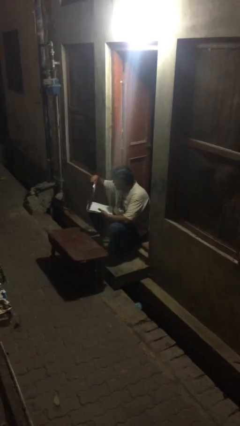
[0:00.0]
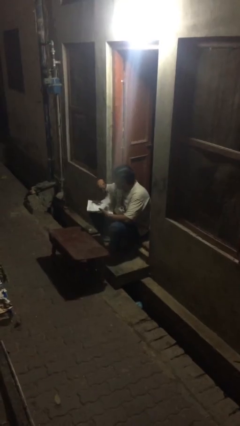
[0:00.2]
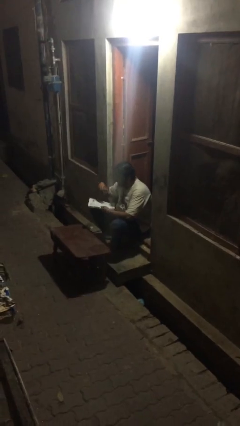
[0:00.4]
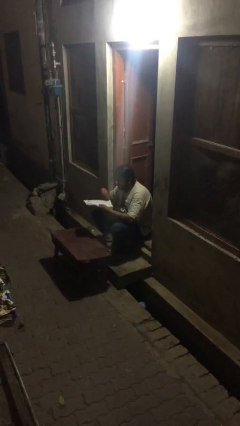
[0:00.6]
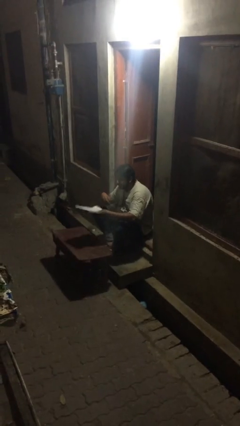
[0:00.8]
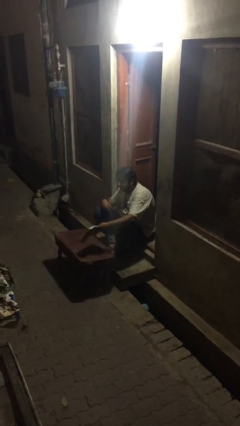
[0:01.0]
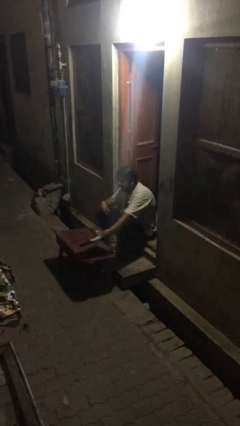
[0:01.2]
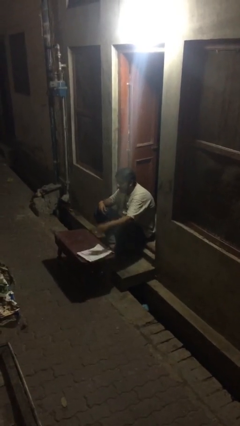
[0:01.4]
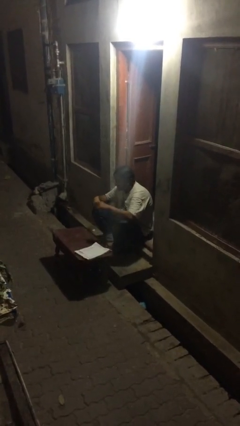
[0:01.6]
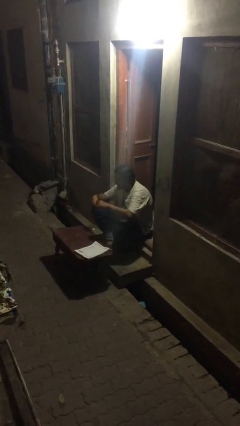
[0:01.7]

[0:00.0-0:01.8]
person puts down object on table

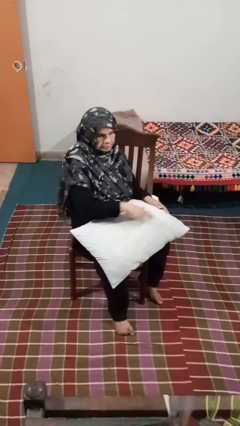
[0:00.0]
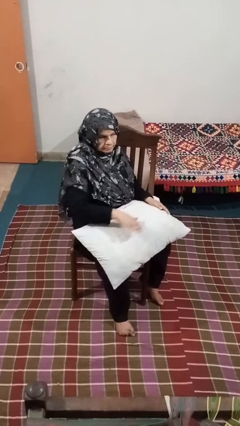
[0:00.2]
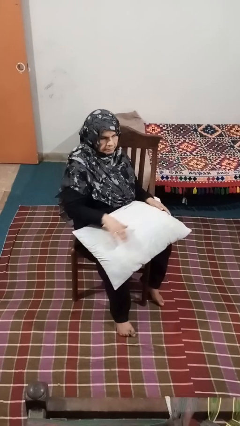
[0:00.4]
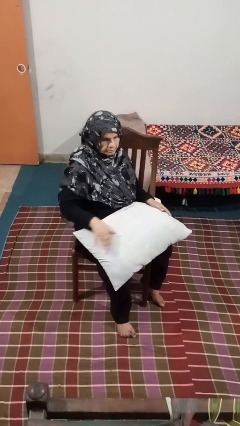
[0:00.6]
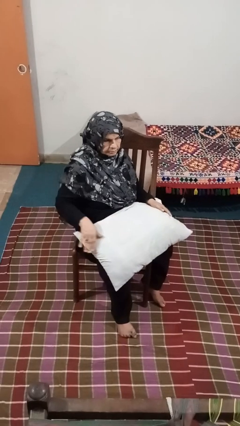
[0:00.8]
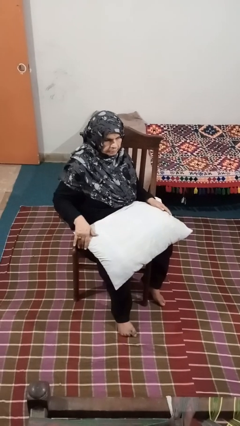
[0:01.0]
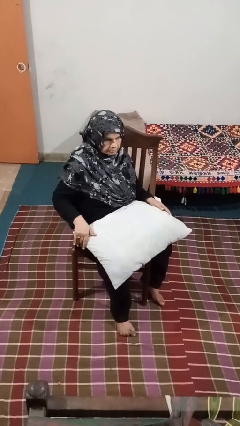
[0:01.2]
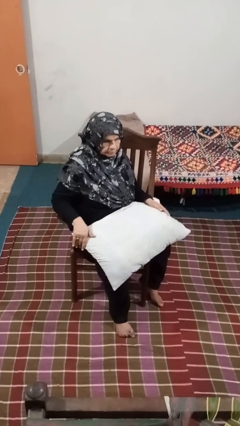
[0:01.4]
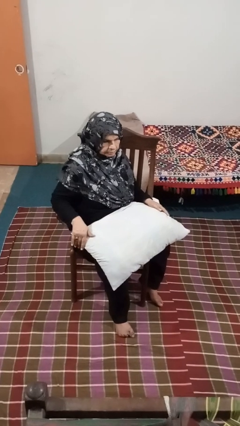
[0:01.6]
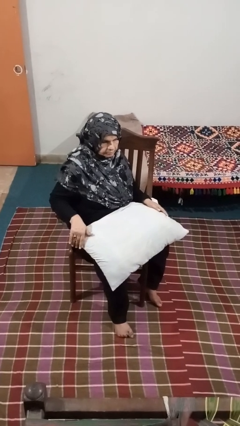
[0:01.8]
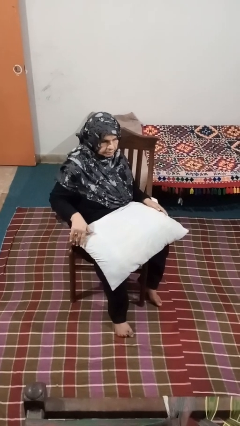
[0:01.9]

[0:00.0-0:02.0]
person waves hand over object

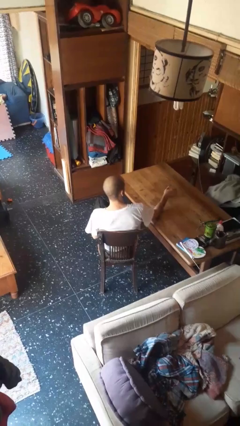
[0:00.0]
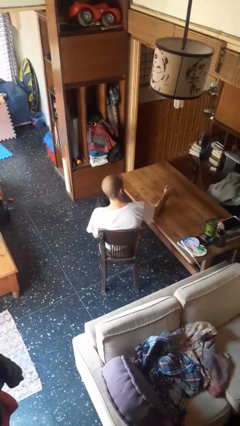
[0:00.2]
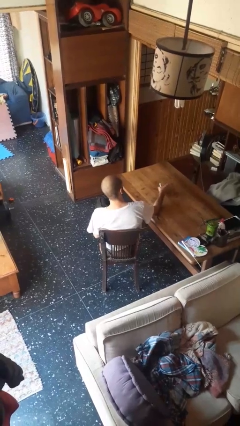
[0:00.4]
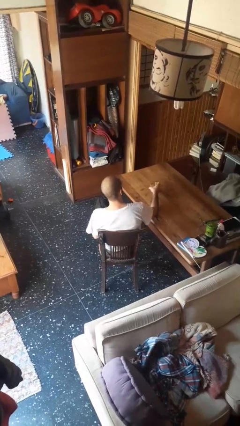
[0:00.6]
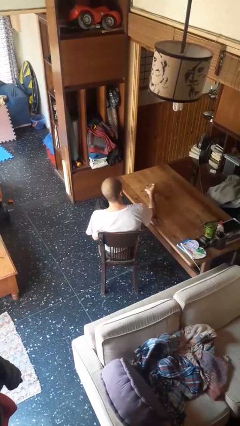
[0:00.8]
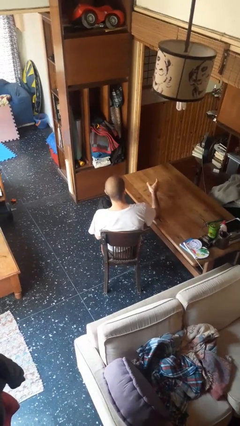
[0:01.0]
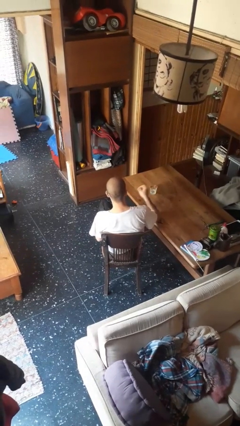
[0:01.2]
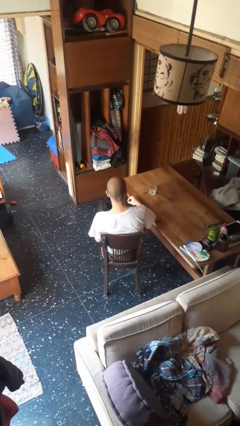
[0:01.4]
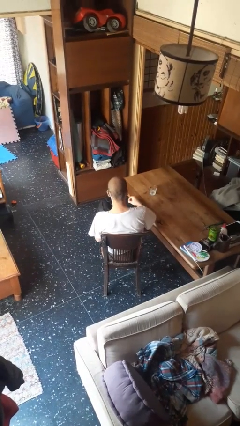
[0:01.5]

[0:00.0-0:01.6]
person sets upright glass

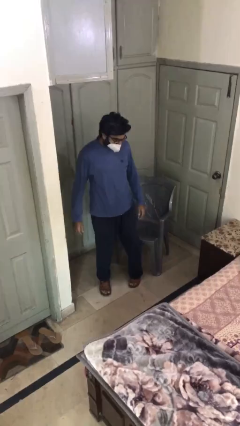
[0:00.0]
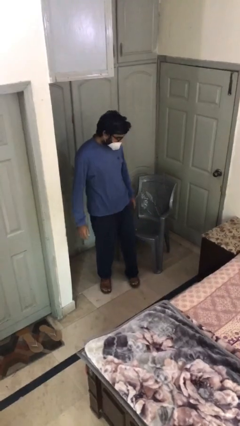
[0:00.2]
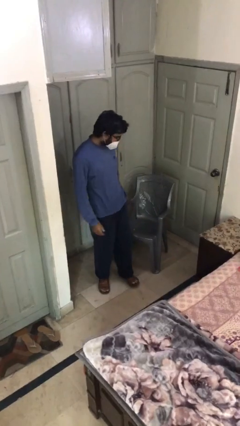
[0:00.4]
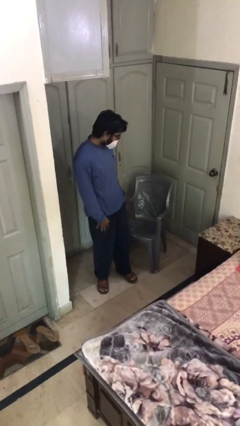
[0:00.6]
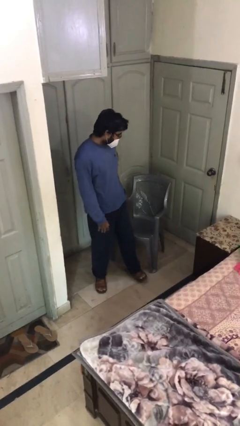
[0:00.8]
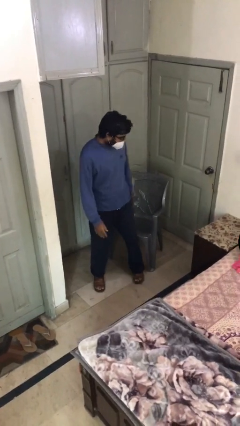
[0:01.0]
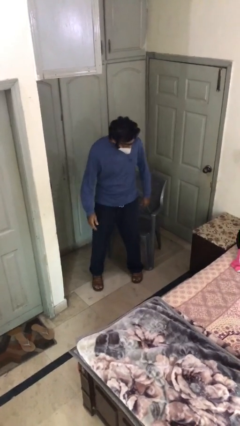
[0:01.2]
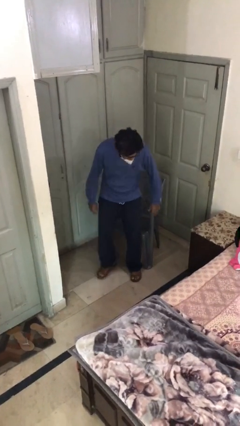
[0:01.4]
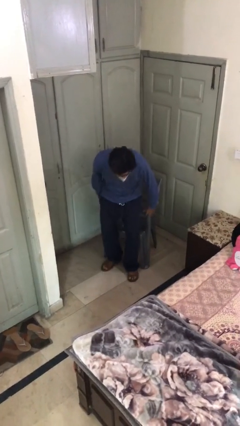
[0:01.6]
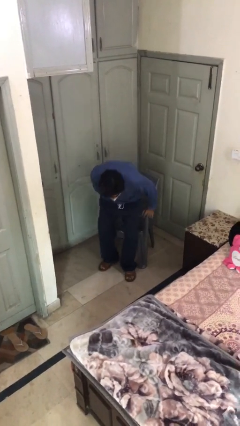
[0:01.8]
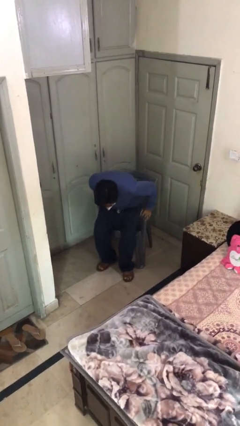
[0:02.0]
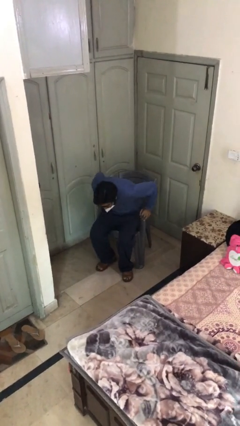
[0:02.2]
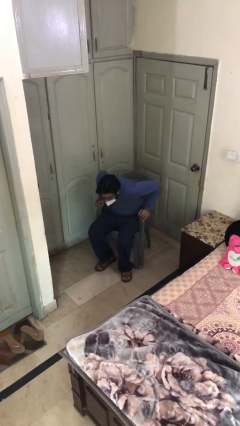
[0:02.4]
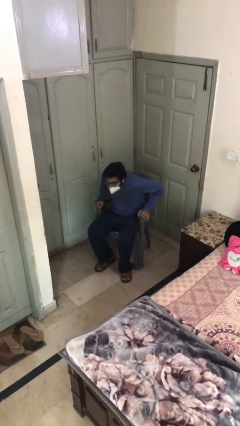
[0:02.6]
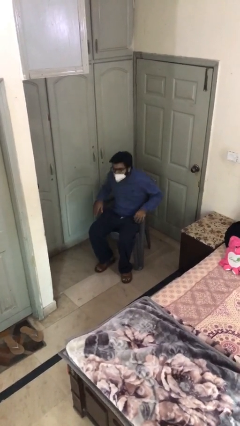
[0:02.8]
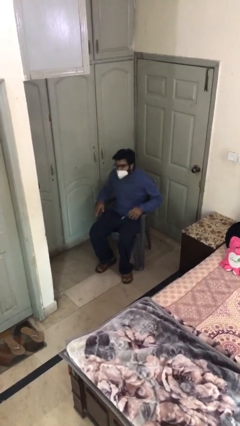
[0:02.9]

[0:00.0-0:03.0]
person sits down

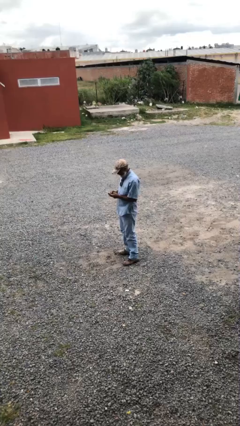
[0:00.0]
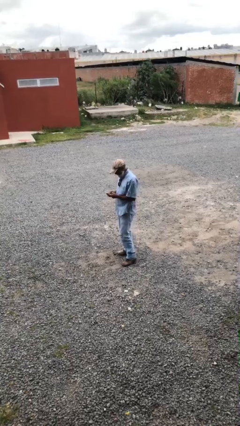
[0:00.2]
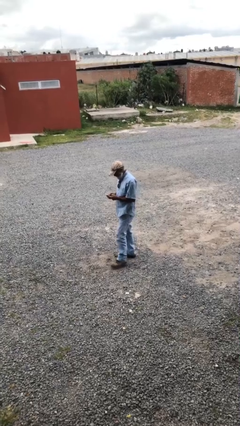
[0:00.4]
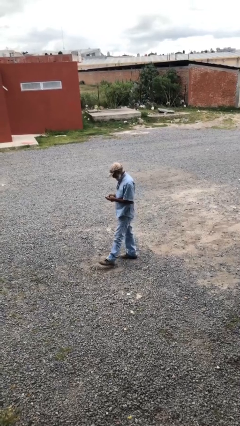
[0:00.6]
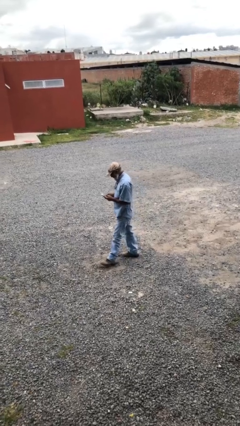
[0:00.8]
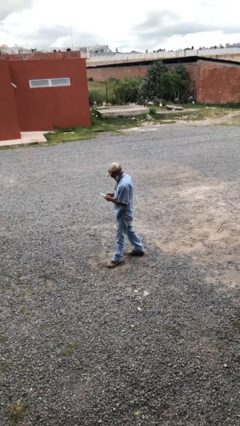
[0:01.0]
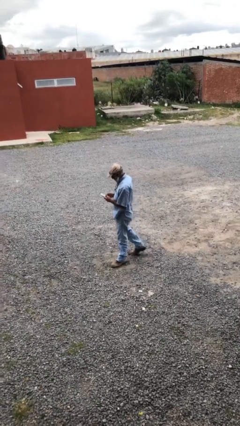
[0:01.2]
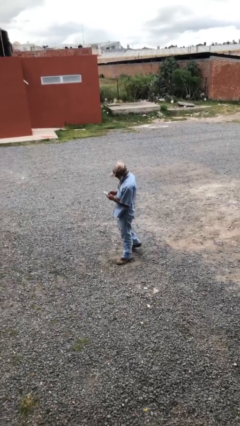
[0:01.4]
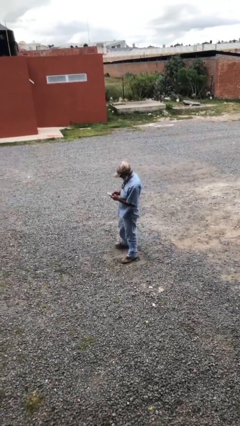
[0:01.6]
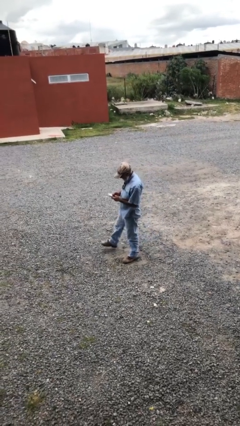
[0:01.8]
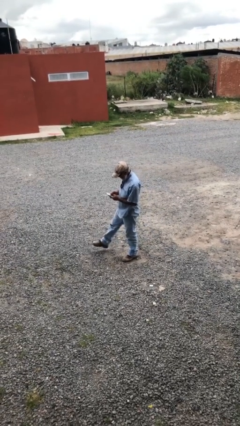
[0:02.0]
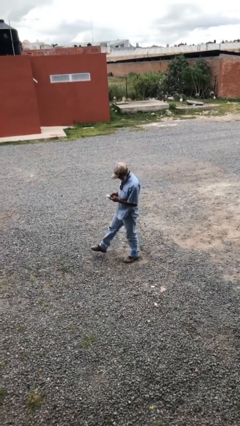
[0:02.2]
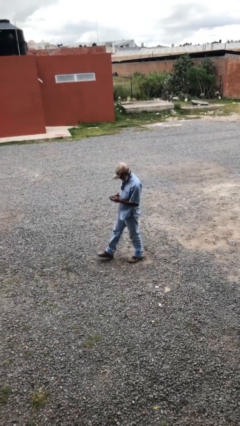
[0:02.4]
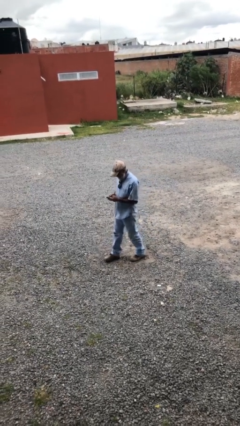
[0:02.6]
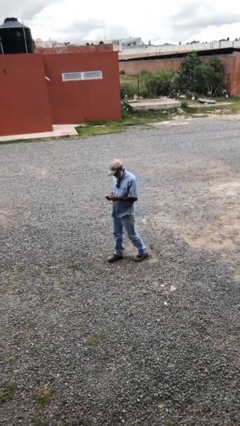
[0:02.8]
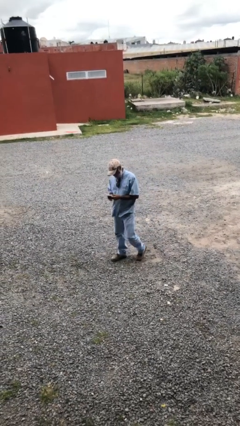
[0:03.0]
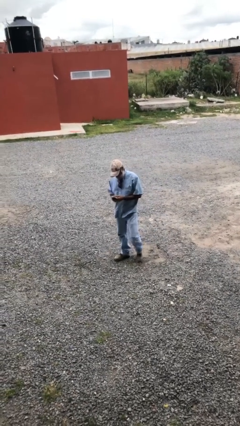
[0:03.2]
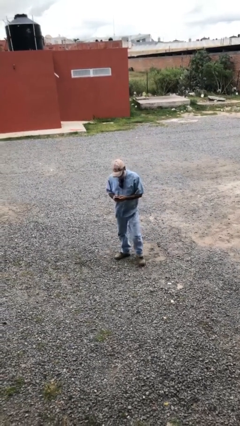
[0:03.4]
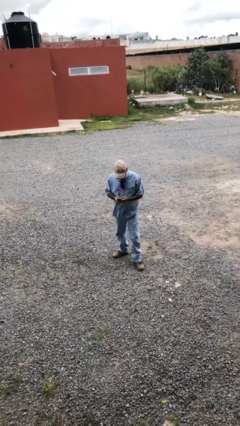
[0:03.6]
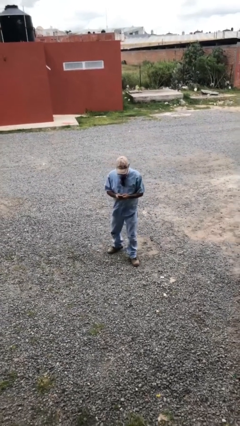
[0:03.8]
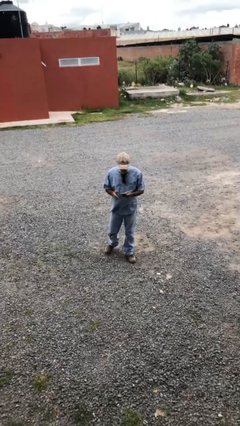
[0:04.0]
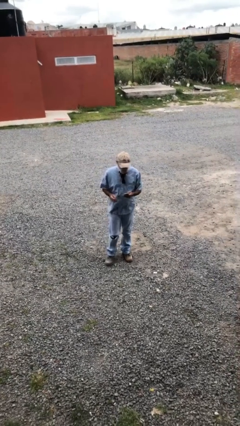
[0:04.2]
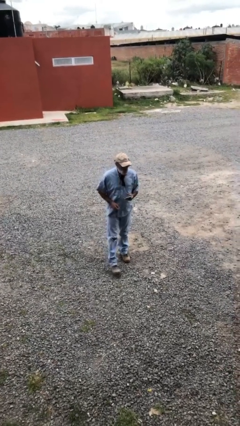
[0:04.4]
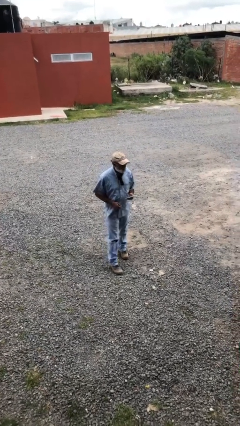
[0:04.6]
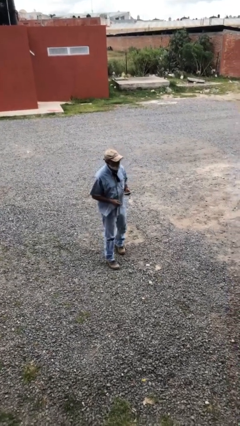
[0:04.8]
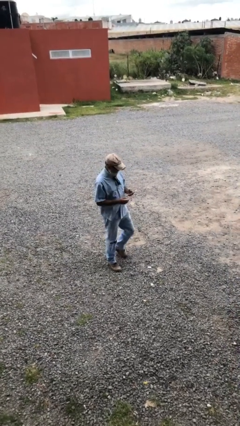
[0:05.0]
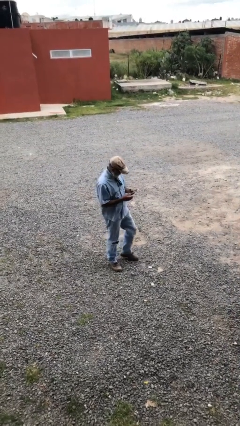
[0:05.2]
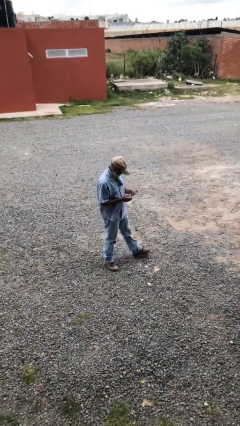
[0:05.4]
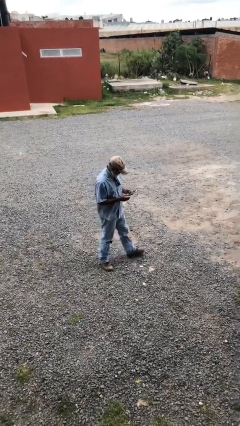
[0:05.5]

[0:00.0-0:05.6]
person texts on phone

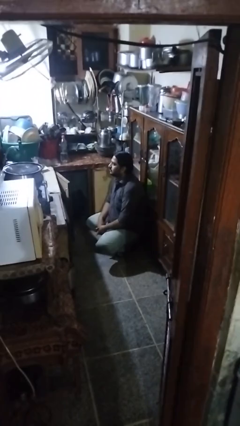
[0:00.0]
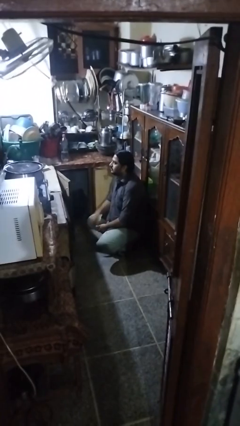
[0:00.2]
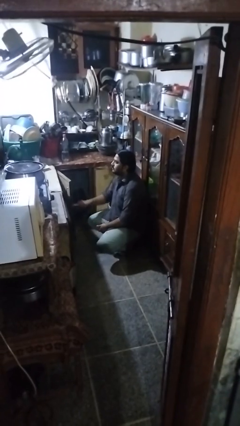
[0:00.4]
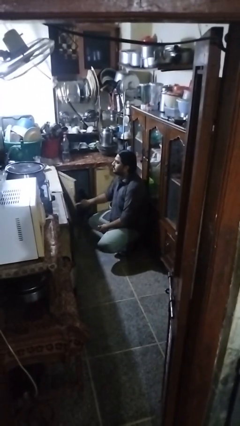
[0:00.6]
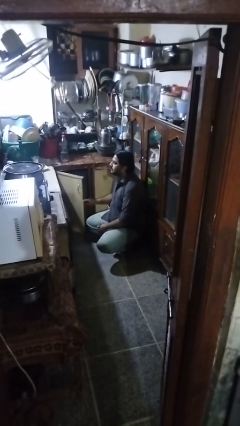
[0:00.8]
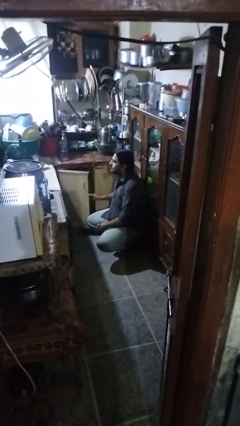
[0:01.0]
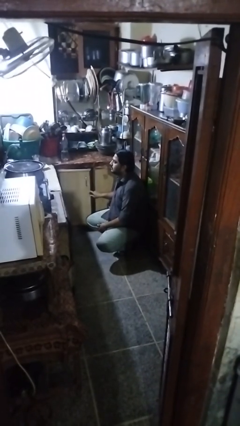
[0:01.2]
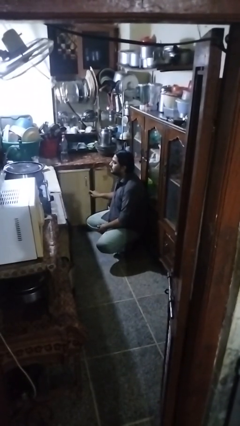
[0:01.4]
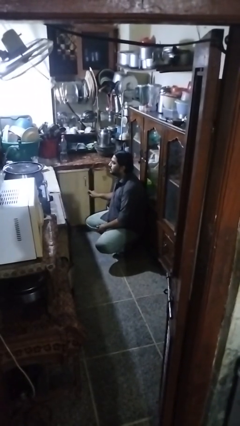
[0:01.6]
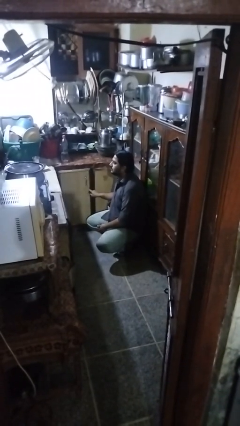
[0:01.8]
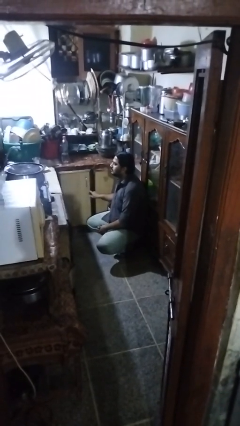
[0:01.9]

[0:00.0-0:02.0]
person closes cabinet

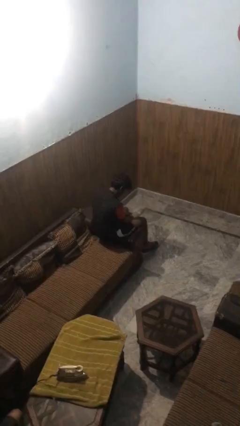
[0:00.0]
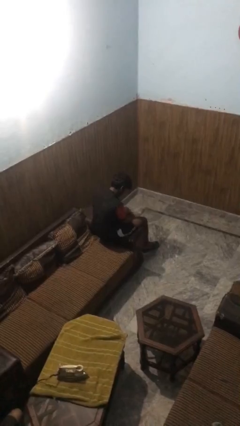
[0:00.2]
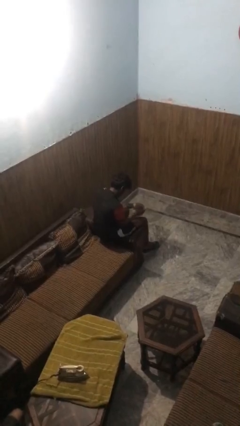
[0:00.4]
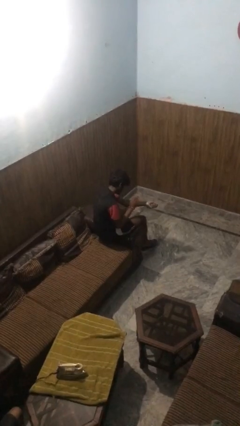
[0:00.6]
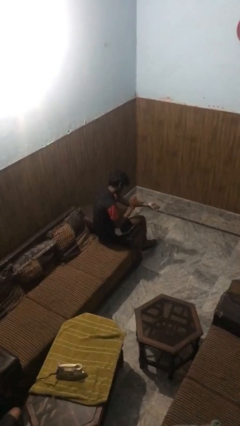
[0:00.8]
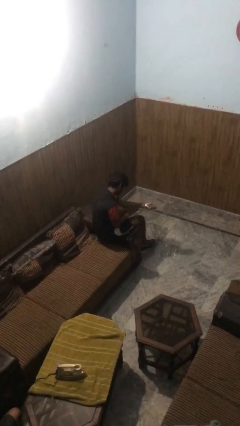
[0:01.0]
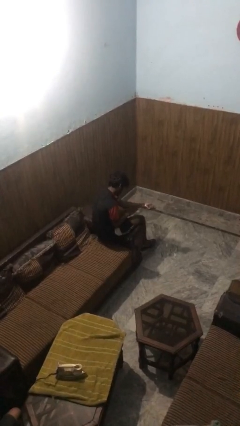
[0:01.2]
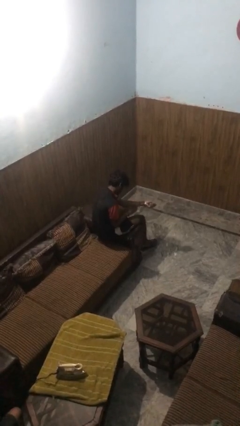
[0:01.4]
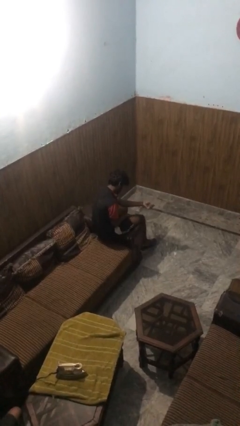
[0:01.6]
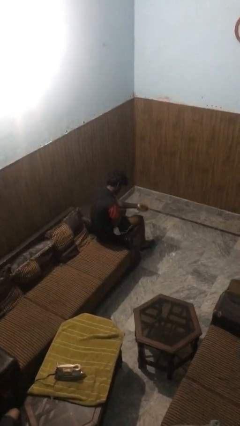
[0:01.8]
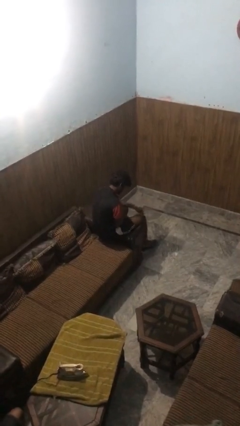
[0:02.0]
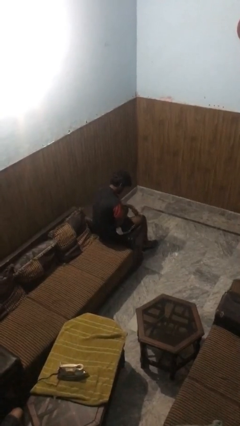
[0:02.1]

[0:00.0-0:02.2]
person swats bug
